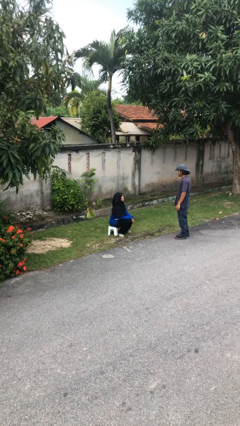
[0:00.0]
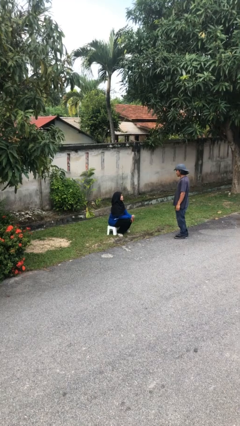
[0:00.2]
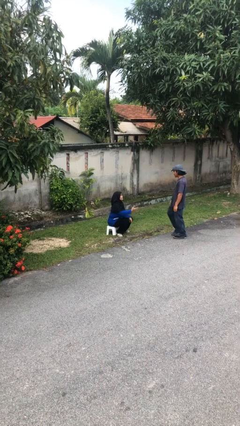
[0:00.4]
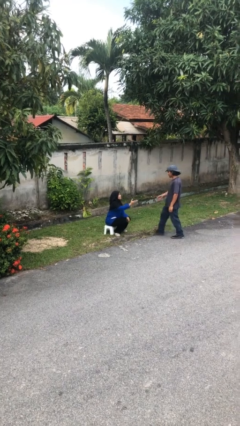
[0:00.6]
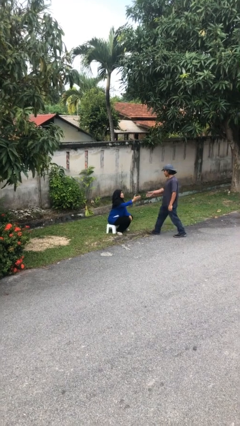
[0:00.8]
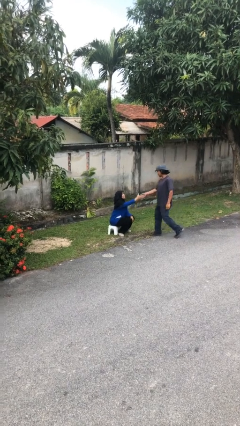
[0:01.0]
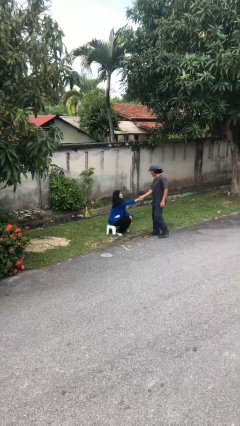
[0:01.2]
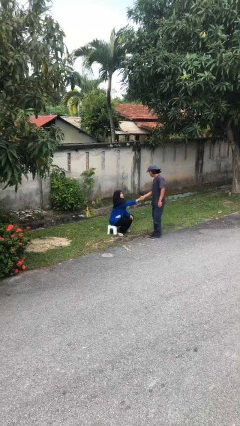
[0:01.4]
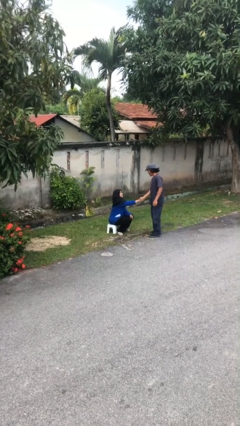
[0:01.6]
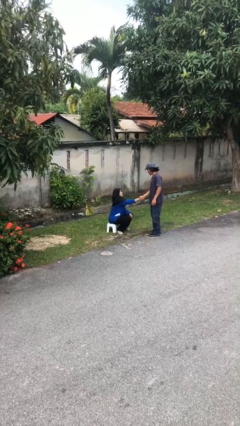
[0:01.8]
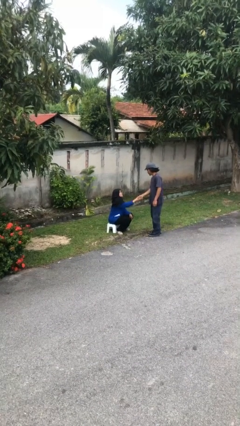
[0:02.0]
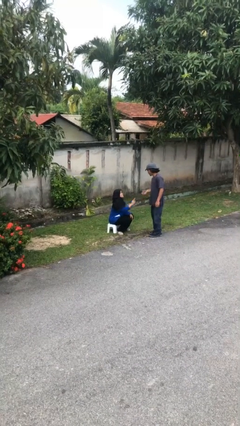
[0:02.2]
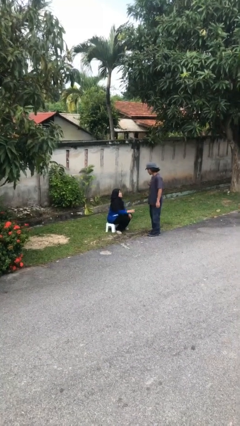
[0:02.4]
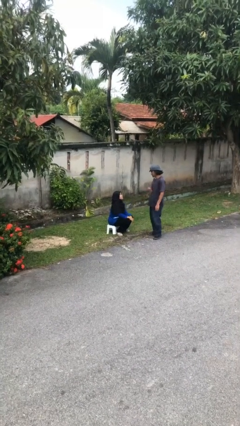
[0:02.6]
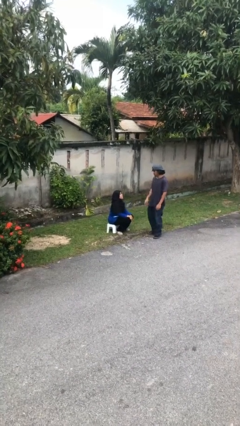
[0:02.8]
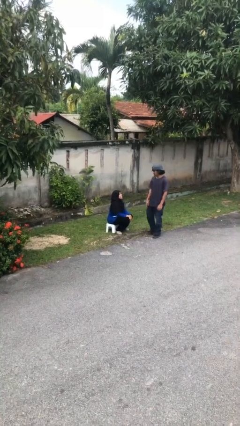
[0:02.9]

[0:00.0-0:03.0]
person shakes hand

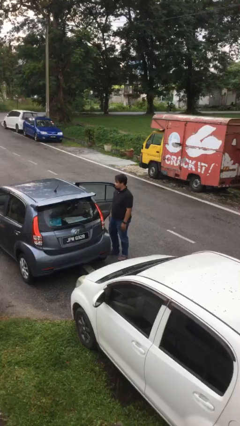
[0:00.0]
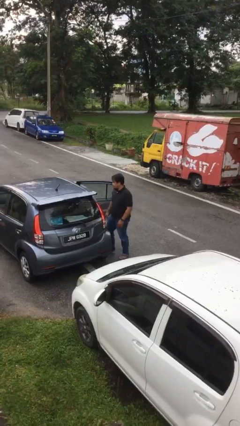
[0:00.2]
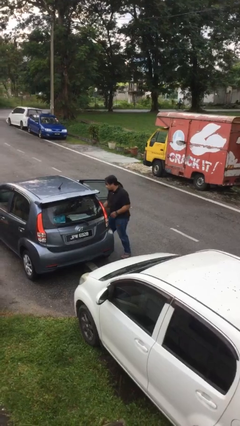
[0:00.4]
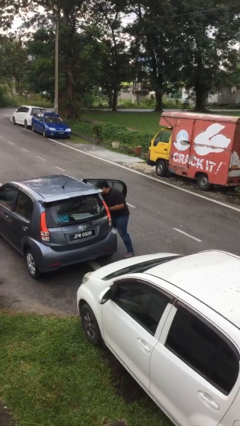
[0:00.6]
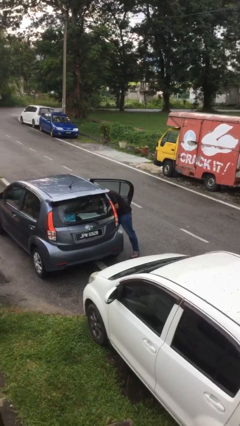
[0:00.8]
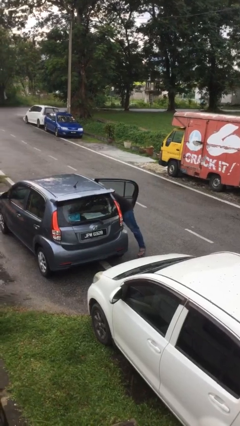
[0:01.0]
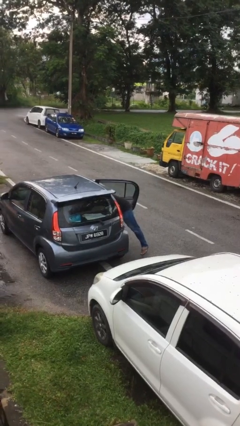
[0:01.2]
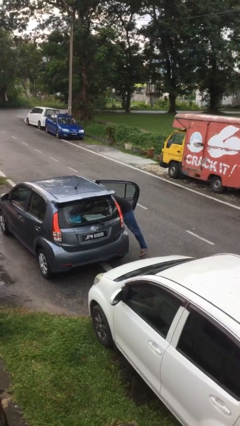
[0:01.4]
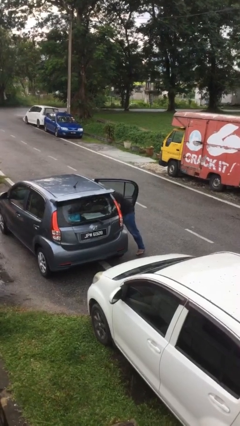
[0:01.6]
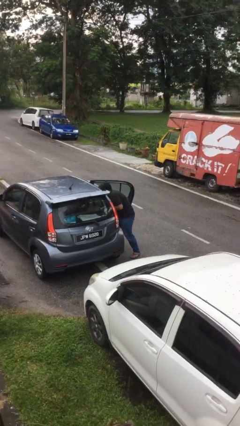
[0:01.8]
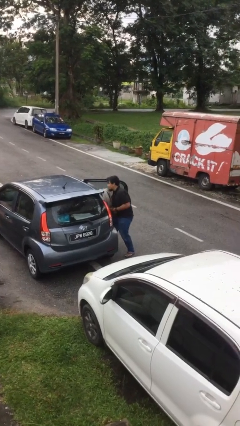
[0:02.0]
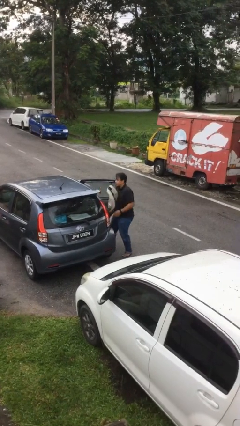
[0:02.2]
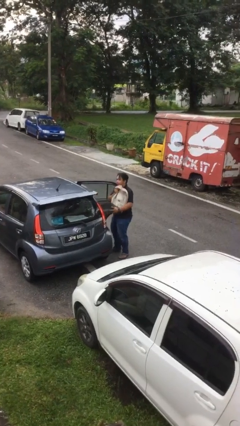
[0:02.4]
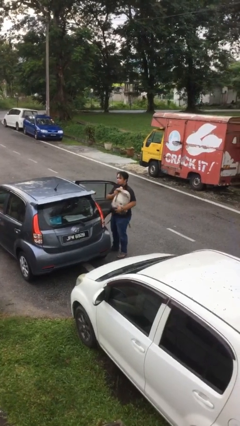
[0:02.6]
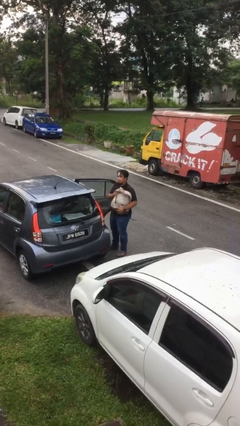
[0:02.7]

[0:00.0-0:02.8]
person unloads car

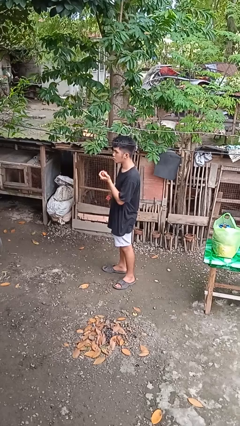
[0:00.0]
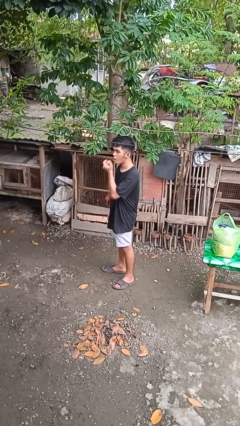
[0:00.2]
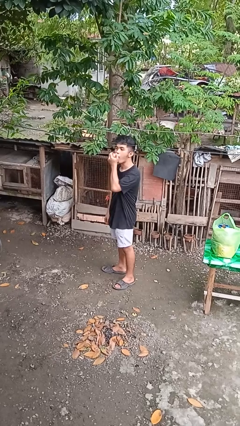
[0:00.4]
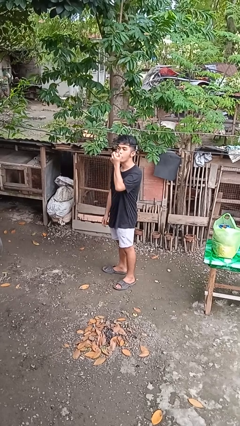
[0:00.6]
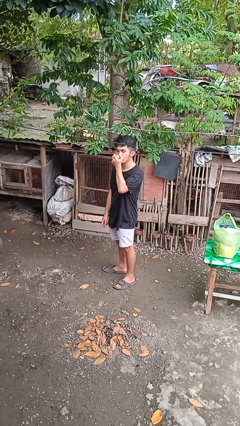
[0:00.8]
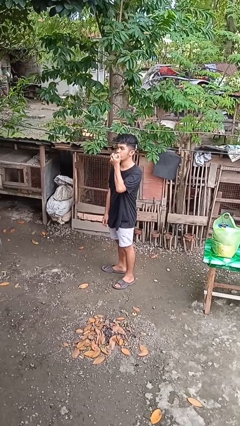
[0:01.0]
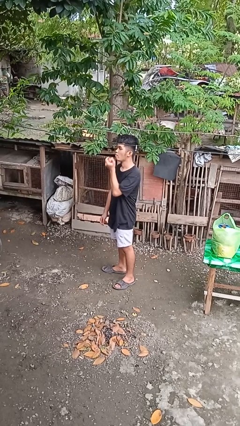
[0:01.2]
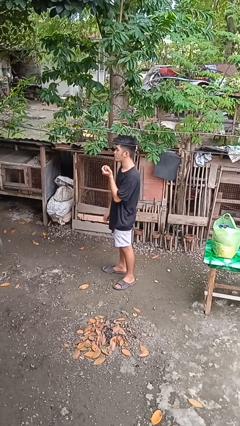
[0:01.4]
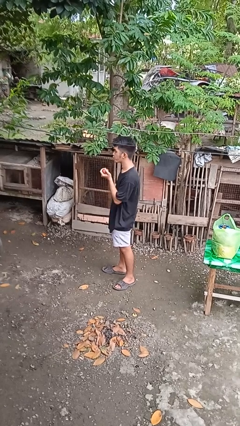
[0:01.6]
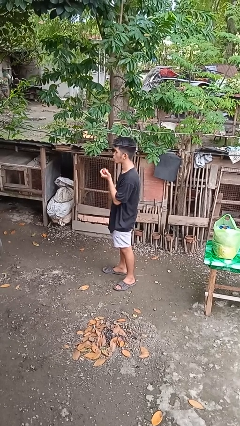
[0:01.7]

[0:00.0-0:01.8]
person eats apple

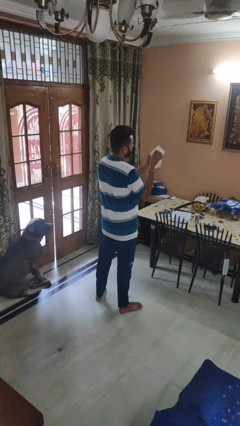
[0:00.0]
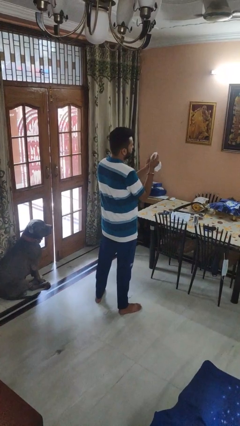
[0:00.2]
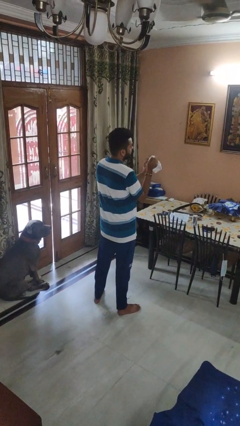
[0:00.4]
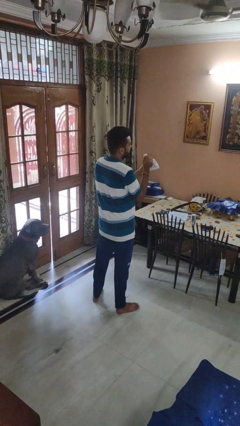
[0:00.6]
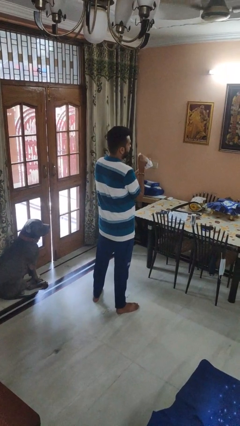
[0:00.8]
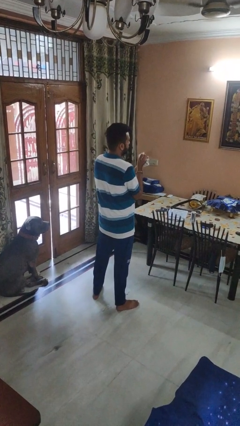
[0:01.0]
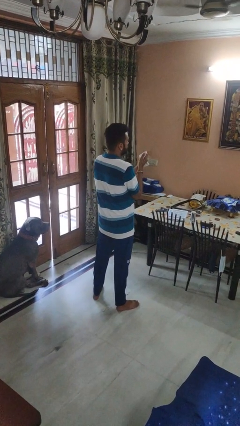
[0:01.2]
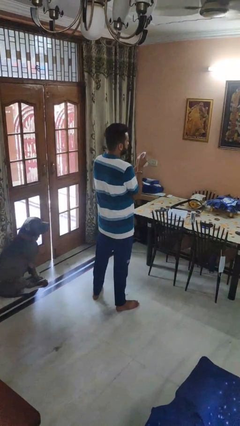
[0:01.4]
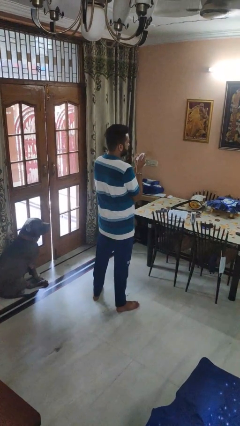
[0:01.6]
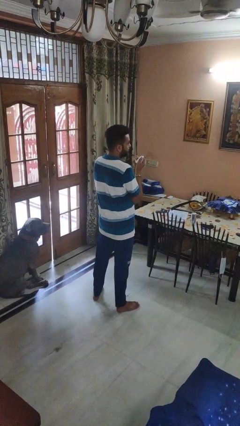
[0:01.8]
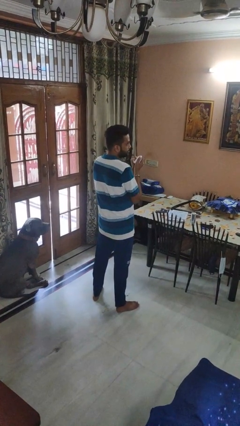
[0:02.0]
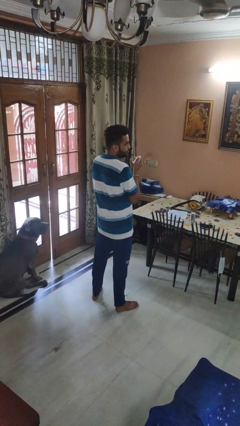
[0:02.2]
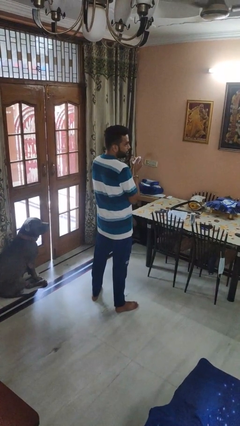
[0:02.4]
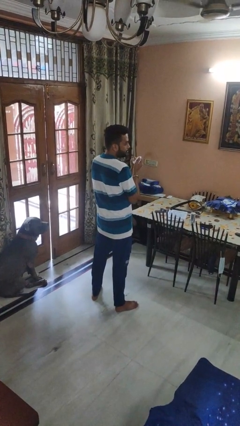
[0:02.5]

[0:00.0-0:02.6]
person crumples paper

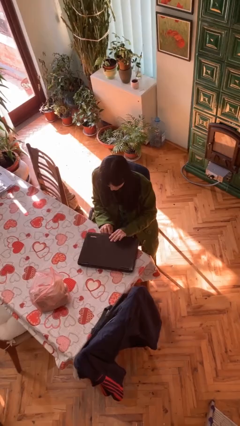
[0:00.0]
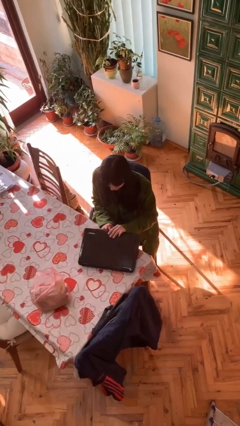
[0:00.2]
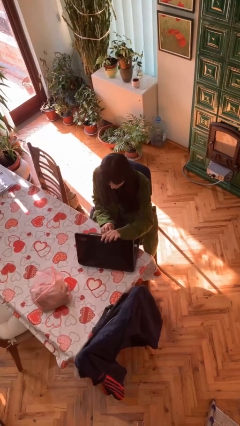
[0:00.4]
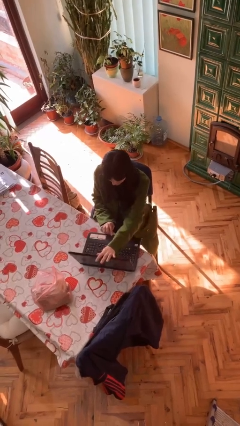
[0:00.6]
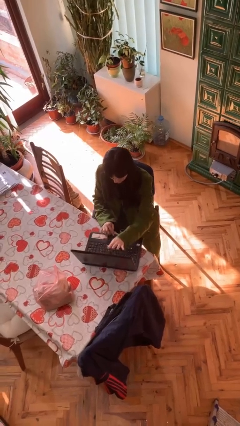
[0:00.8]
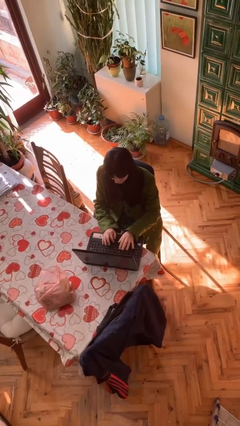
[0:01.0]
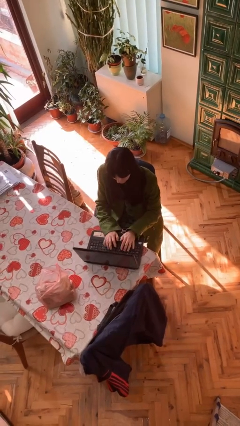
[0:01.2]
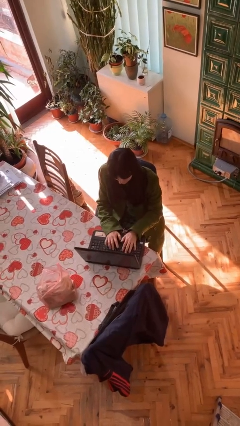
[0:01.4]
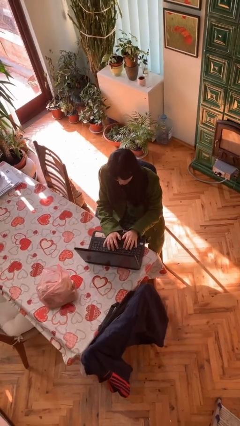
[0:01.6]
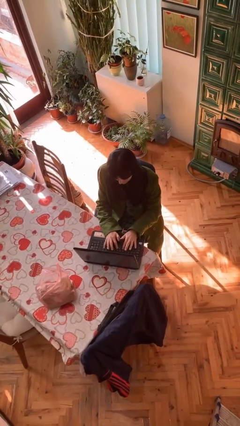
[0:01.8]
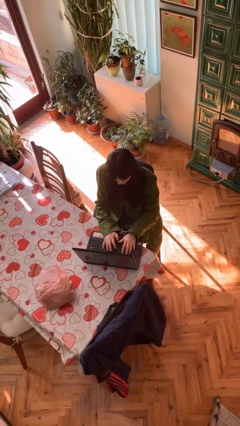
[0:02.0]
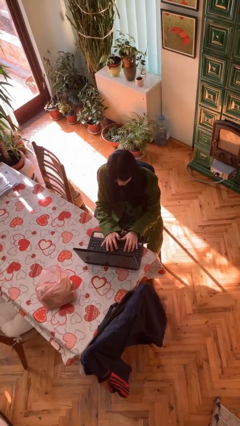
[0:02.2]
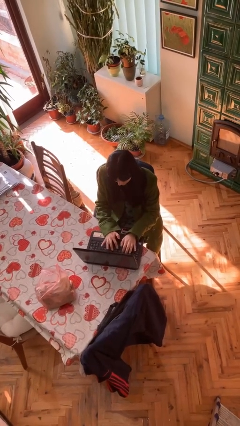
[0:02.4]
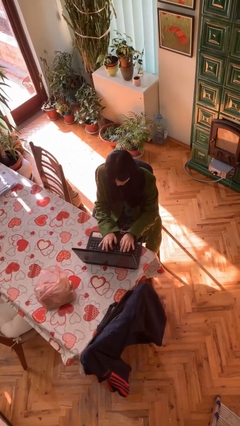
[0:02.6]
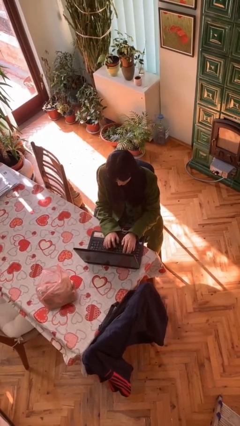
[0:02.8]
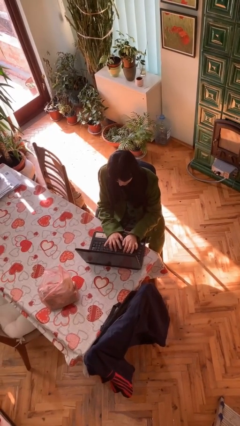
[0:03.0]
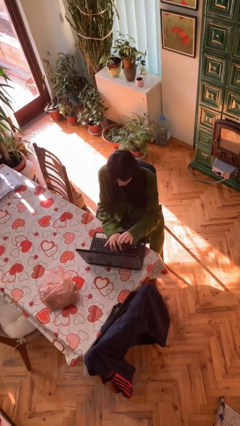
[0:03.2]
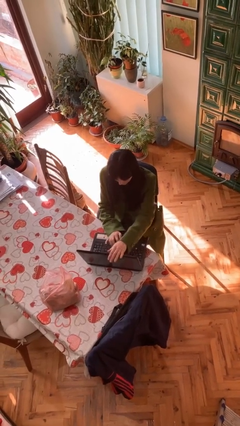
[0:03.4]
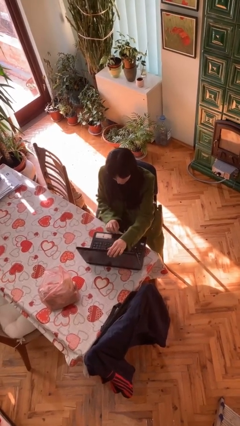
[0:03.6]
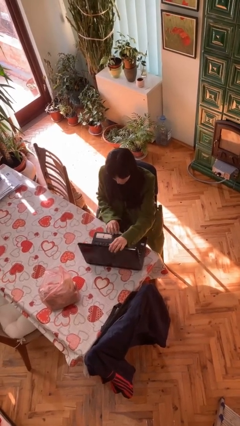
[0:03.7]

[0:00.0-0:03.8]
person interacts with laptop

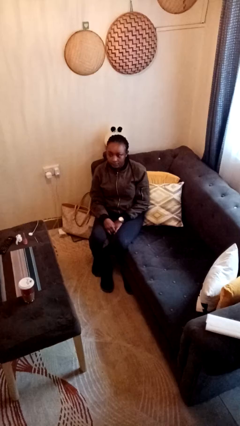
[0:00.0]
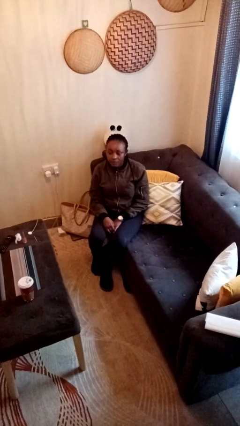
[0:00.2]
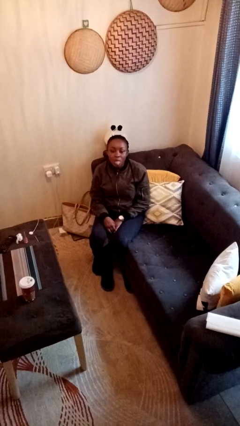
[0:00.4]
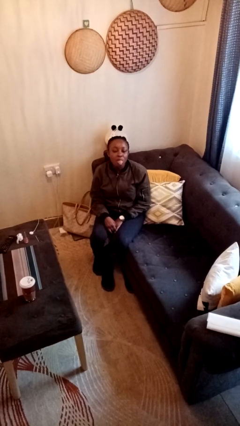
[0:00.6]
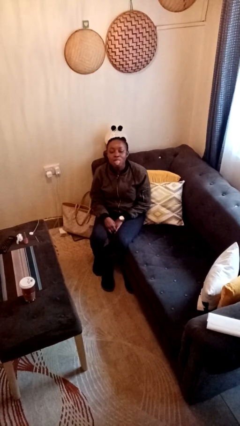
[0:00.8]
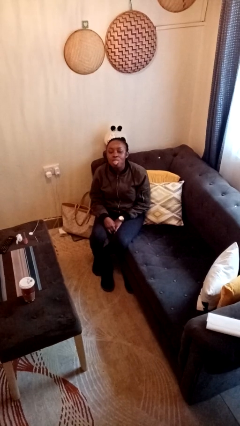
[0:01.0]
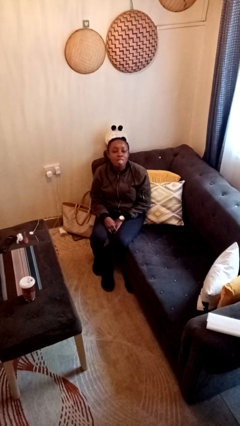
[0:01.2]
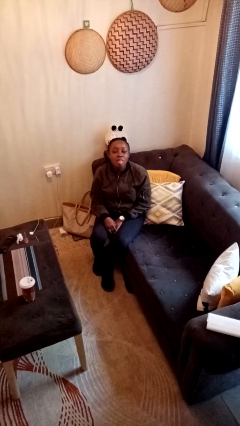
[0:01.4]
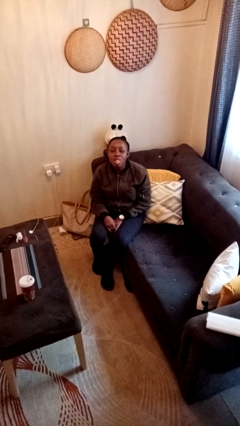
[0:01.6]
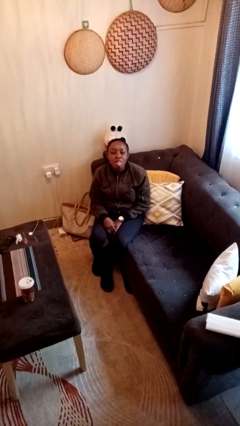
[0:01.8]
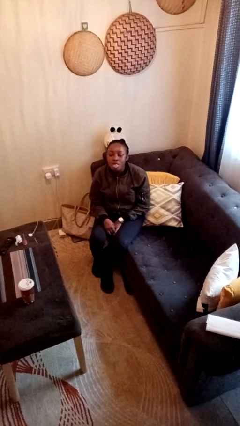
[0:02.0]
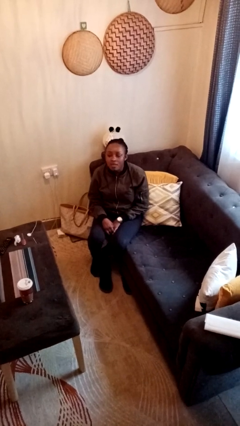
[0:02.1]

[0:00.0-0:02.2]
person sticks out tongue

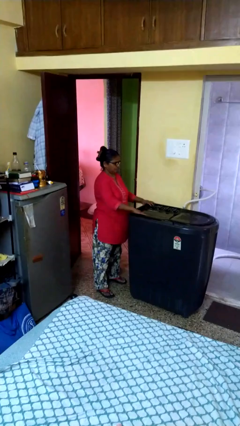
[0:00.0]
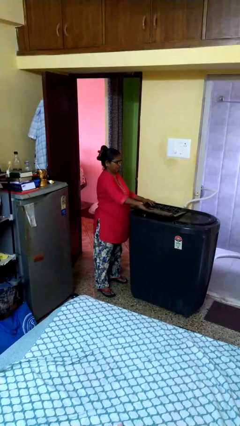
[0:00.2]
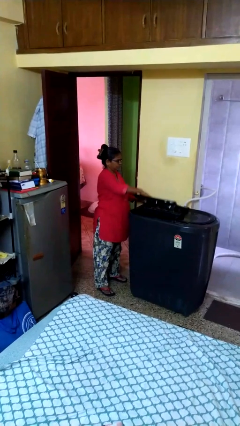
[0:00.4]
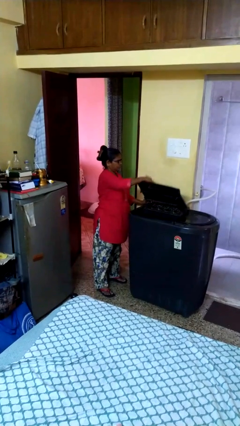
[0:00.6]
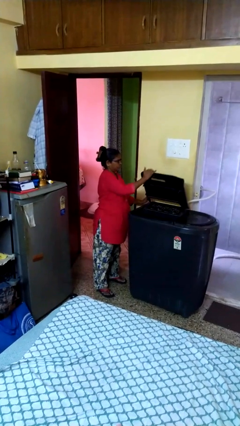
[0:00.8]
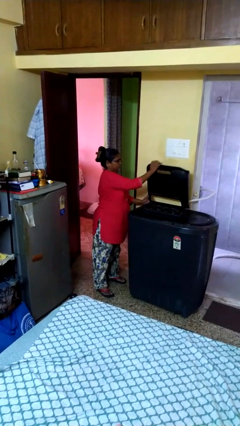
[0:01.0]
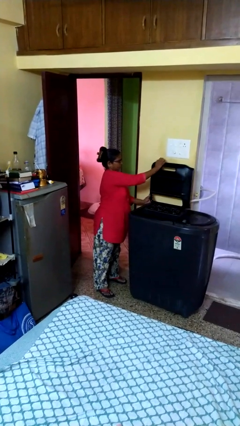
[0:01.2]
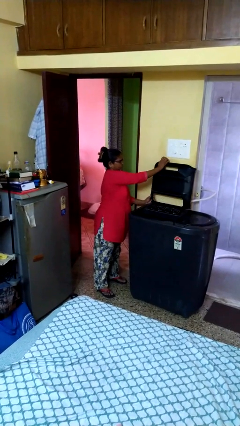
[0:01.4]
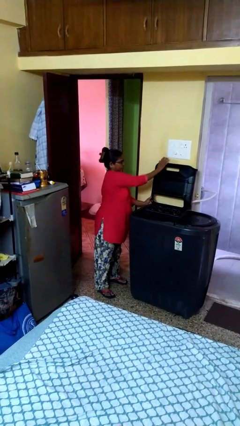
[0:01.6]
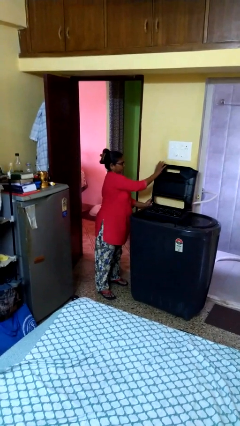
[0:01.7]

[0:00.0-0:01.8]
person opens clothes washer
